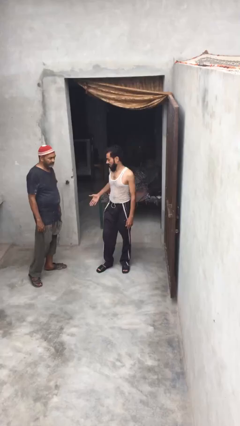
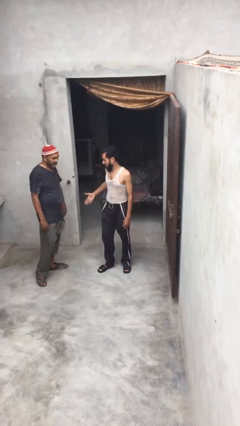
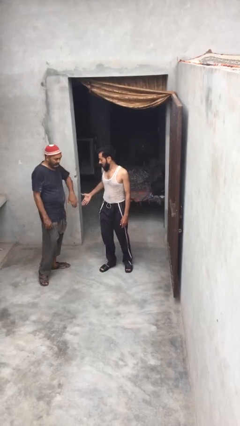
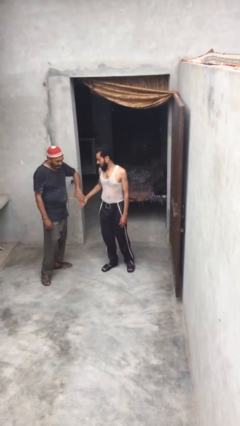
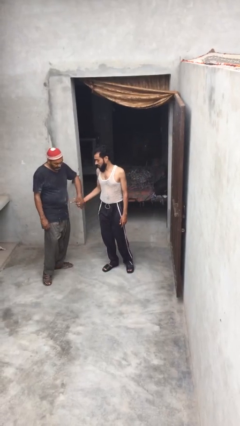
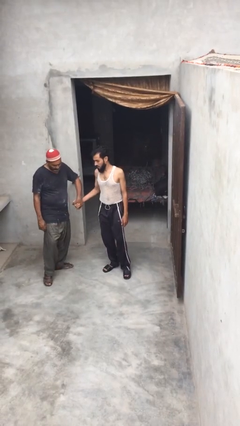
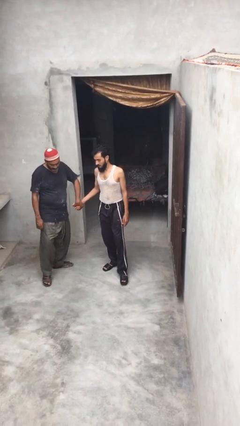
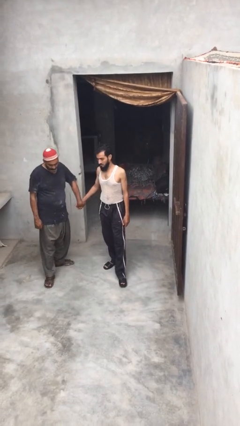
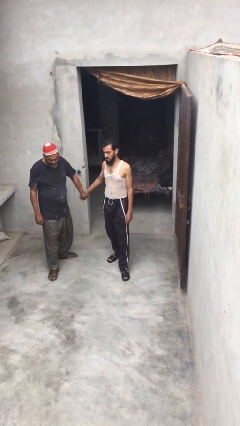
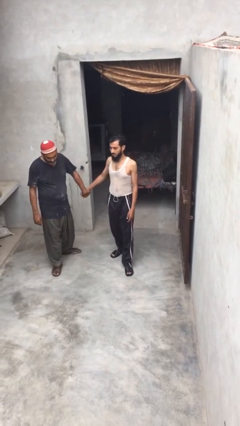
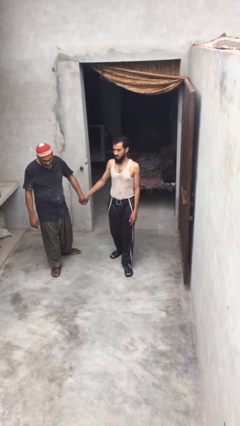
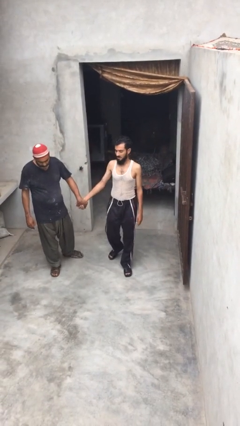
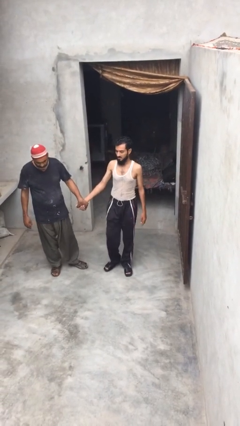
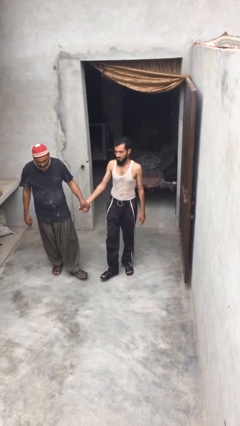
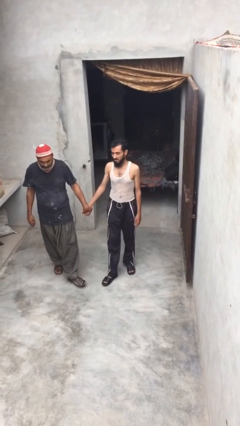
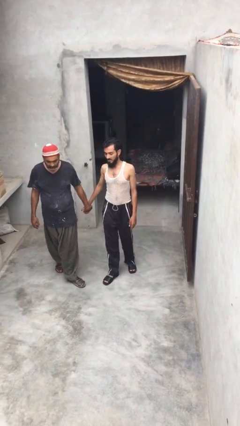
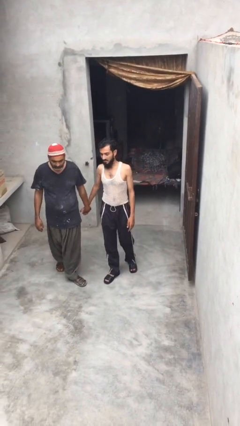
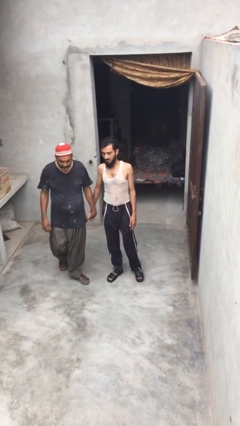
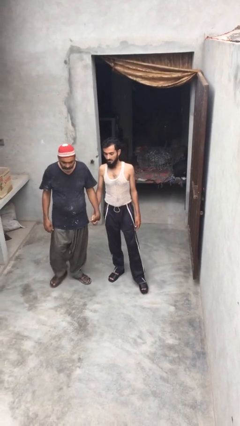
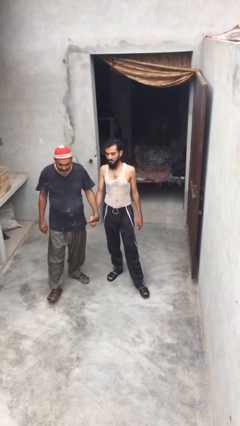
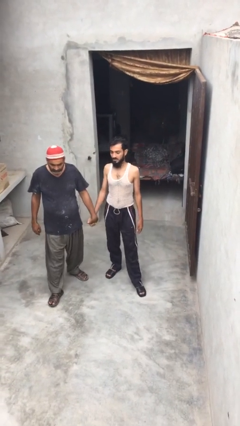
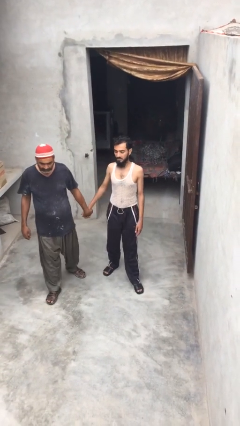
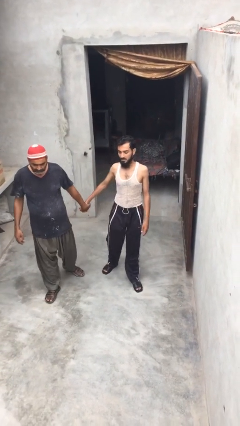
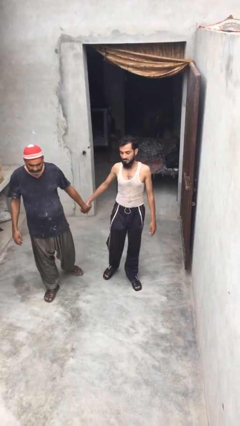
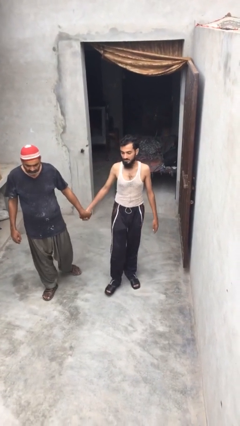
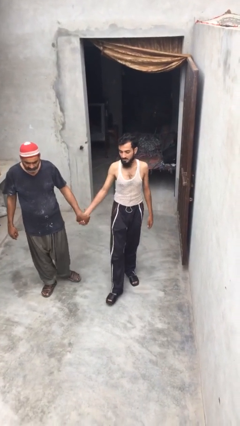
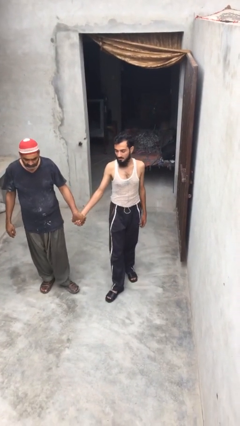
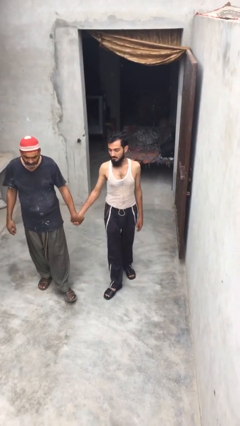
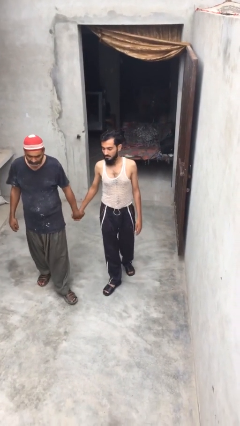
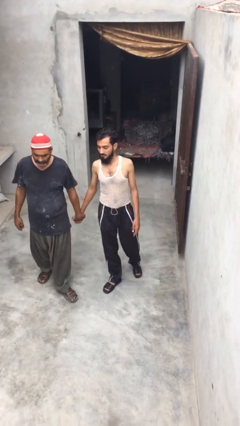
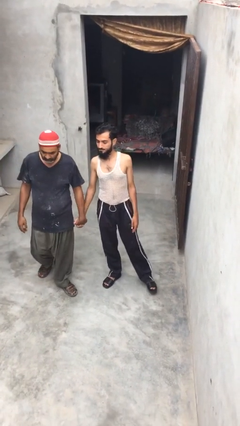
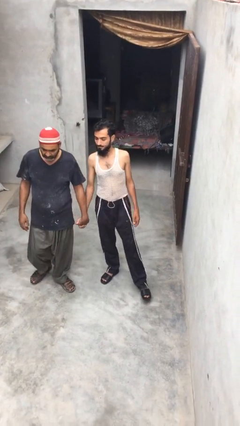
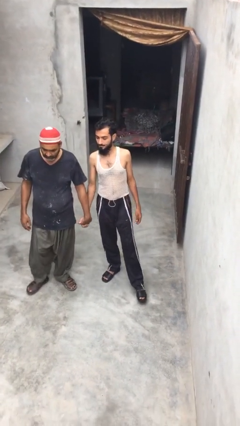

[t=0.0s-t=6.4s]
person holds hand

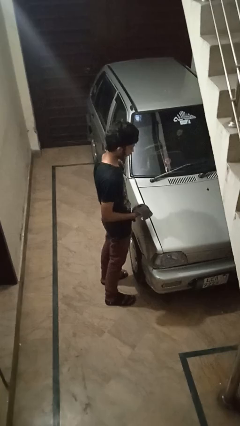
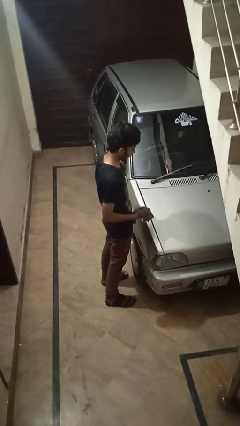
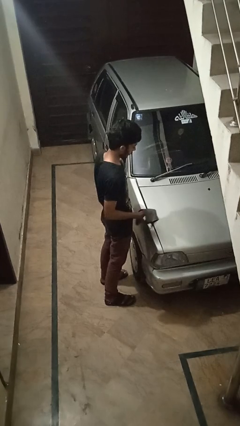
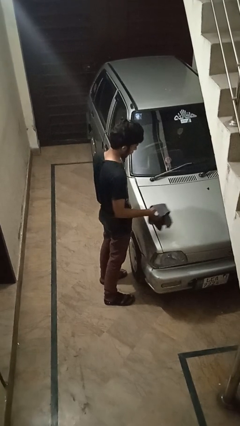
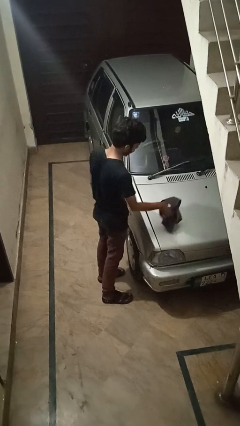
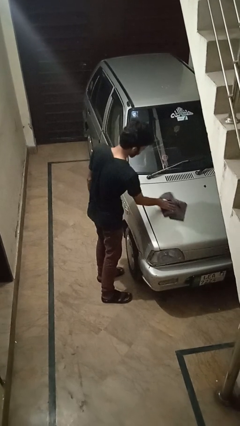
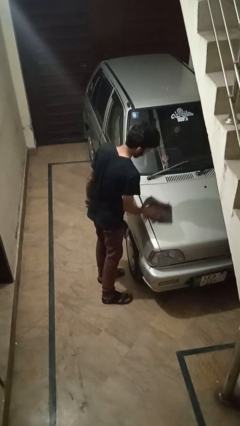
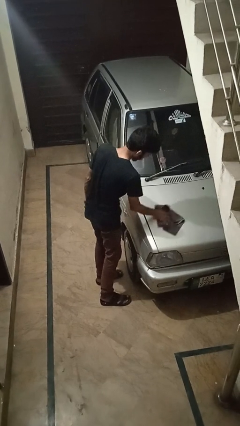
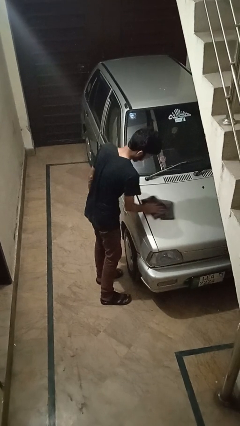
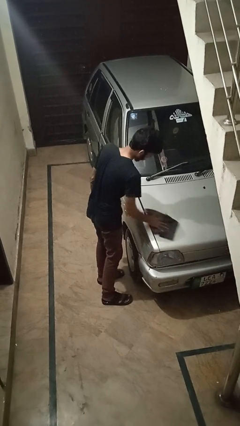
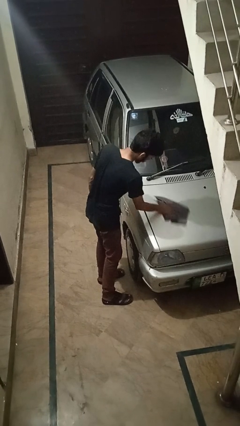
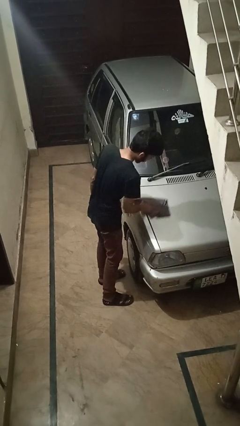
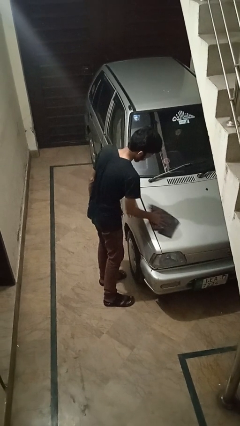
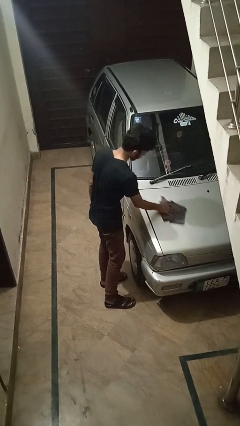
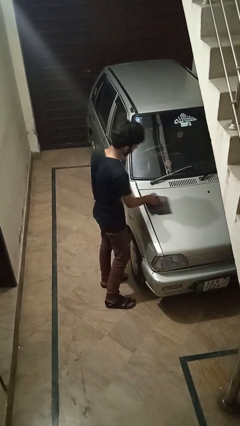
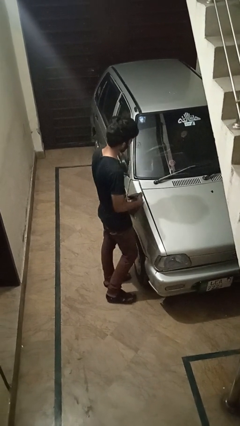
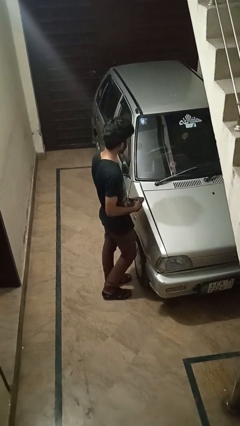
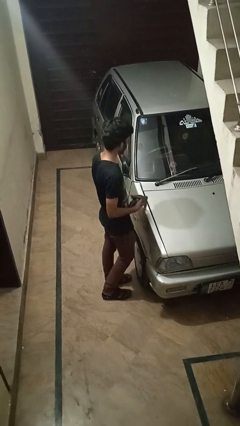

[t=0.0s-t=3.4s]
person polishes car with rag

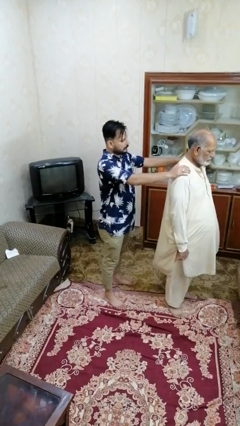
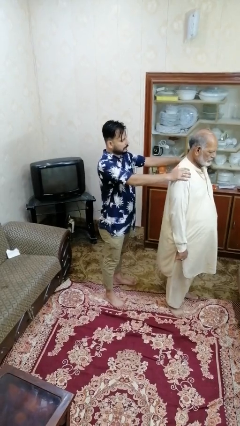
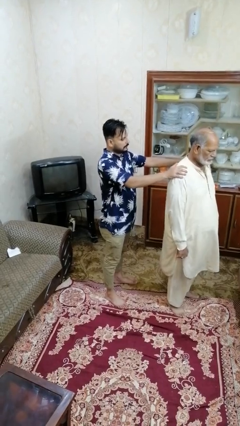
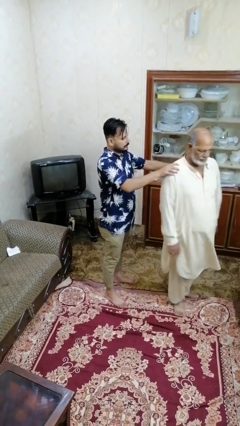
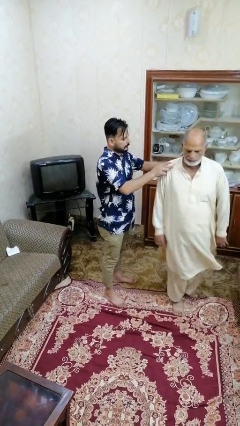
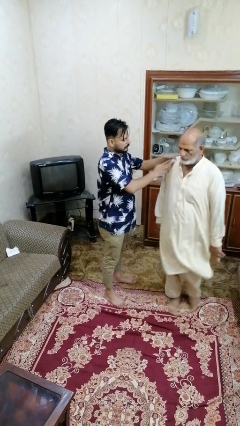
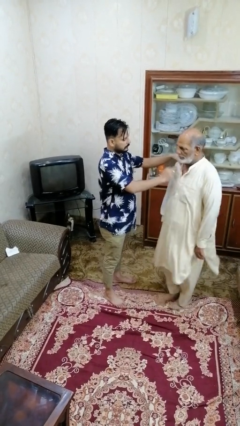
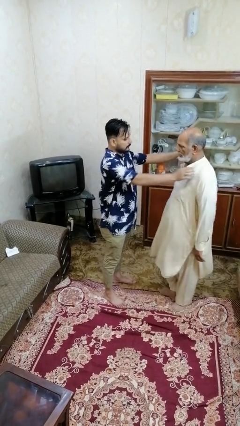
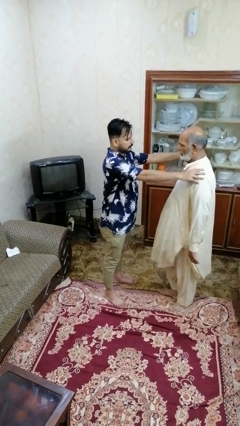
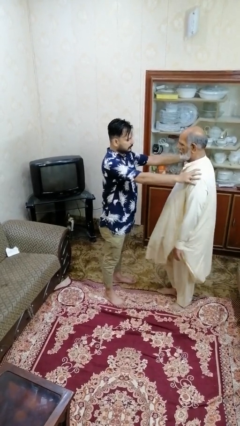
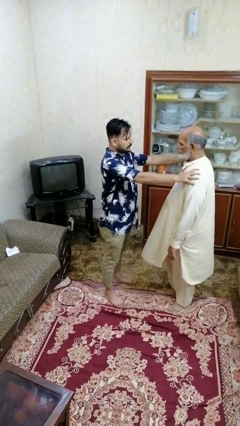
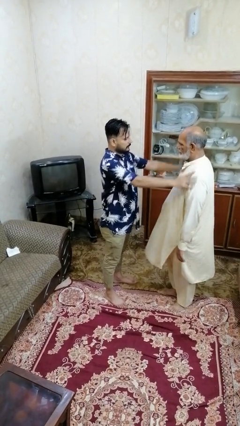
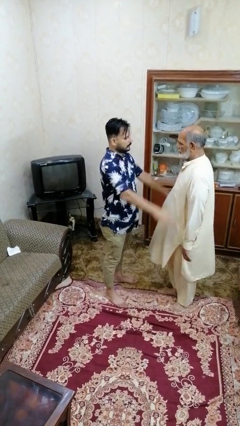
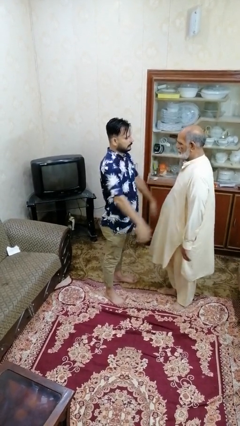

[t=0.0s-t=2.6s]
person spins person around

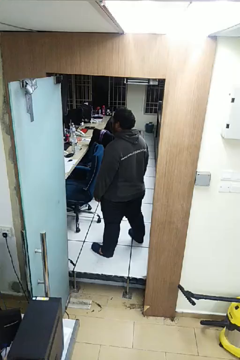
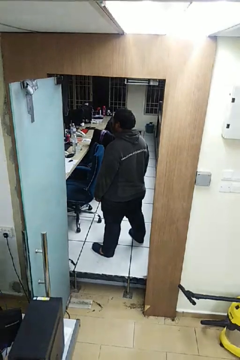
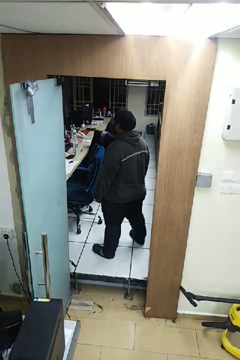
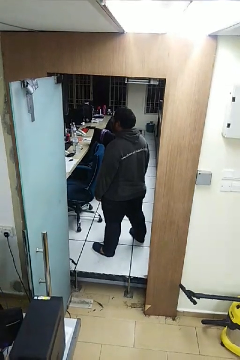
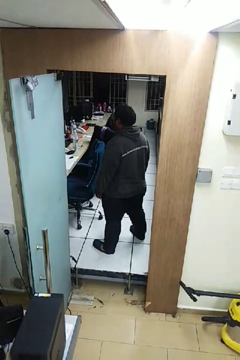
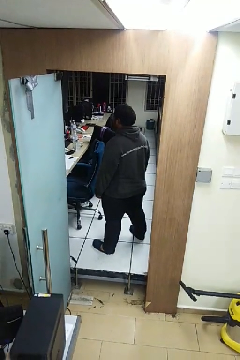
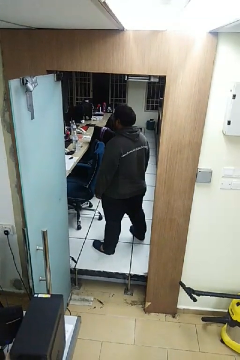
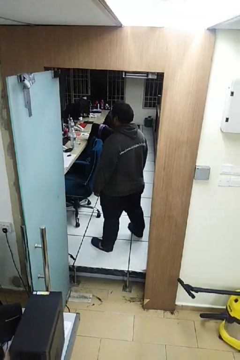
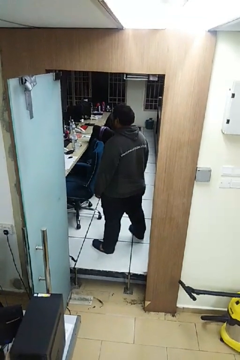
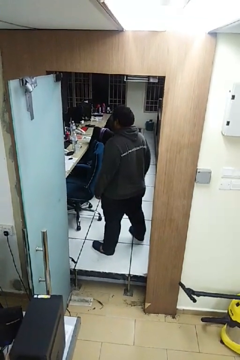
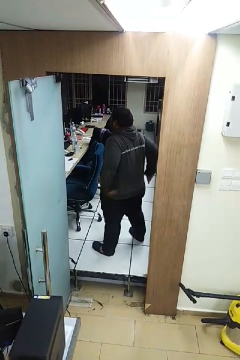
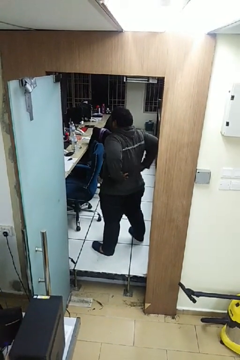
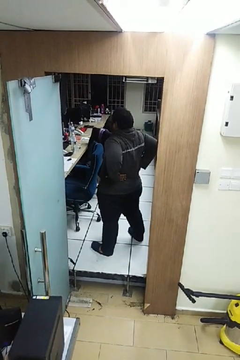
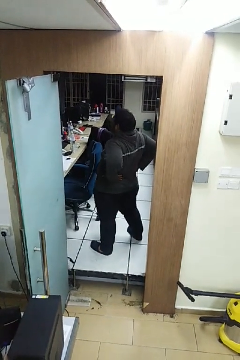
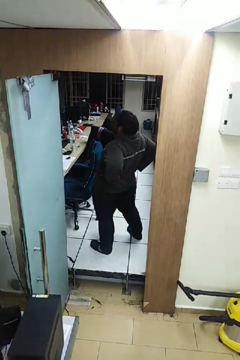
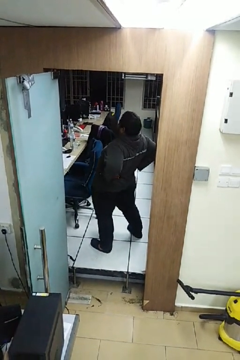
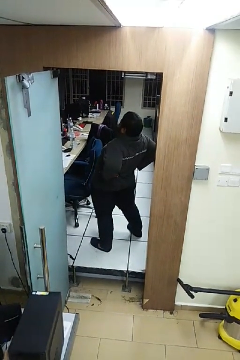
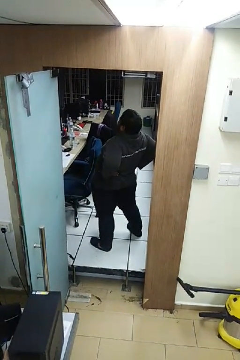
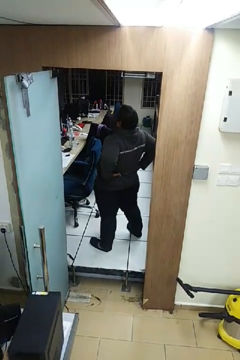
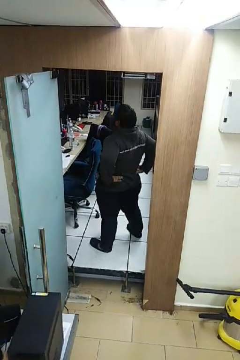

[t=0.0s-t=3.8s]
person stretches back

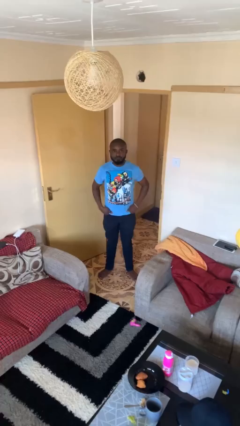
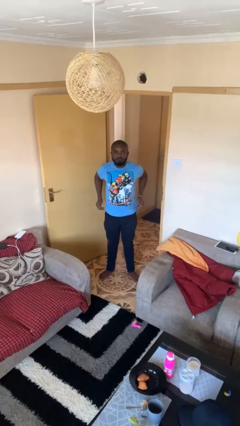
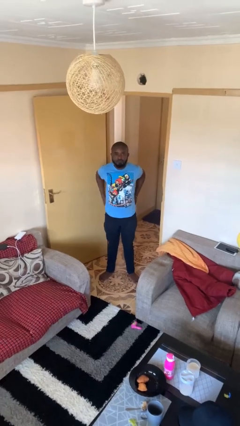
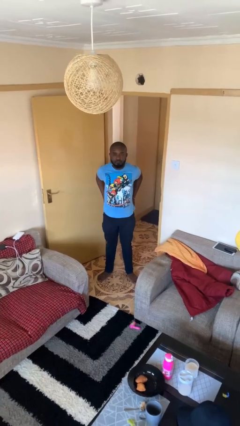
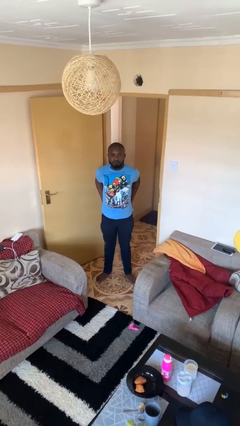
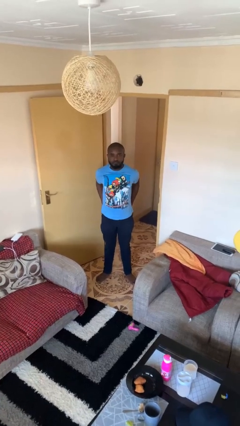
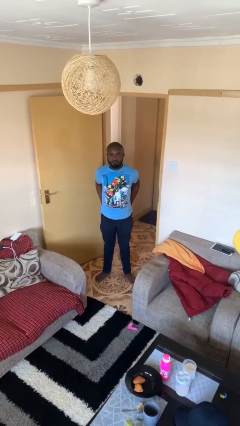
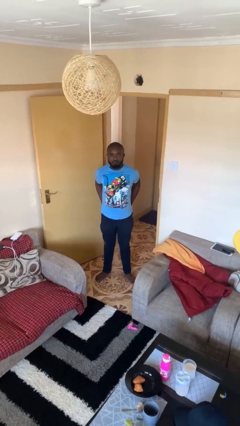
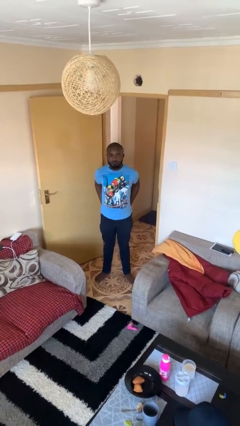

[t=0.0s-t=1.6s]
person puts hands in back pockets

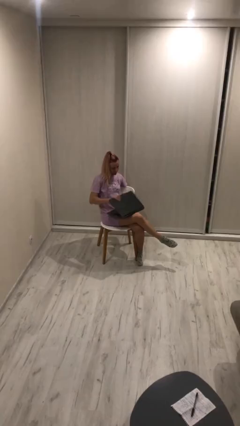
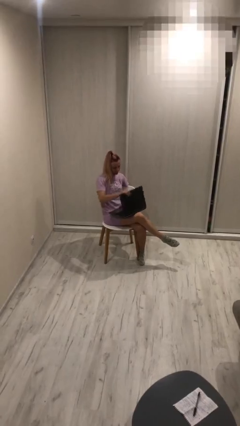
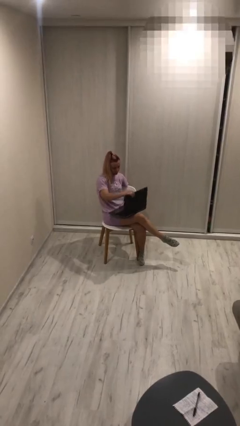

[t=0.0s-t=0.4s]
person opens laptop
